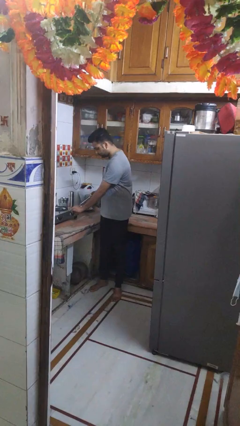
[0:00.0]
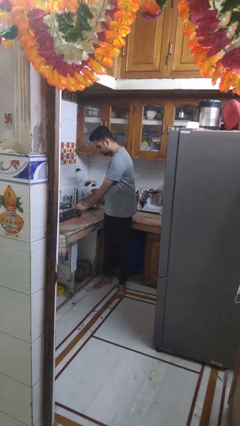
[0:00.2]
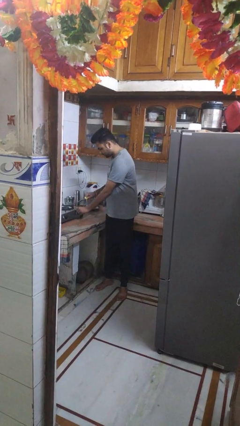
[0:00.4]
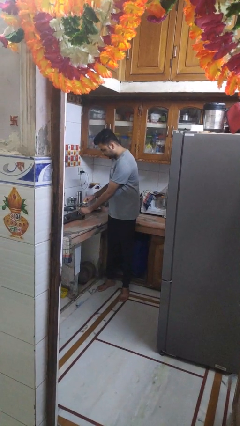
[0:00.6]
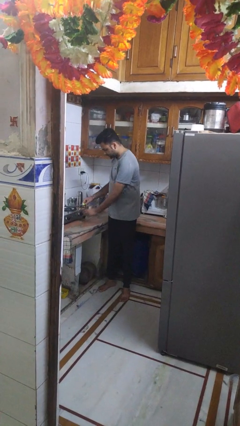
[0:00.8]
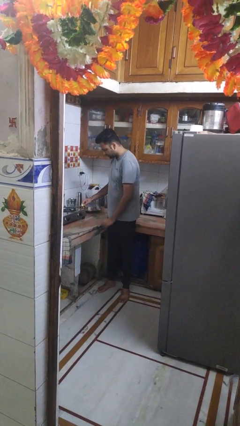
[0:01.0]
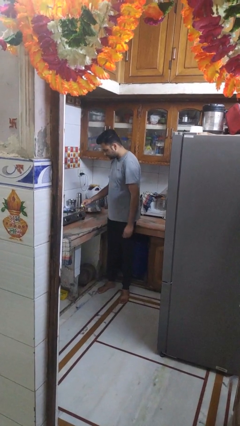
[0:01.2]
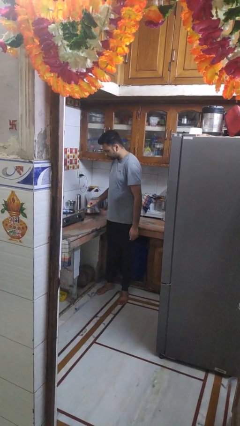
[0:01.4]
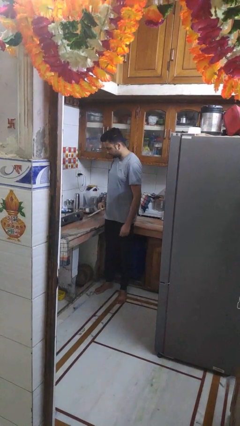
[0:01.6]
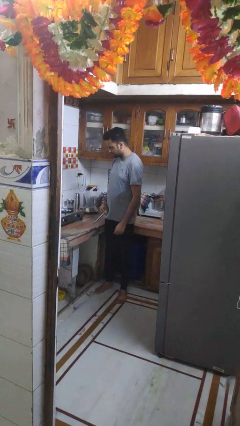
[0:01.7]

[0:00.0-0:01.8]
person turns on stovetop

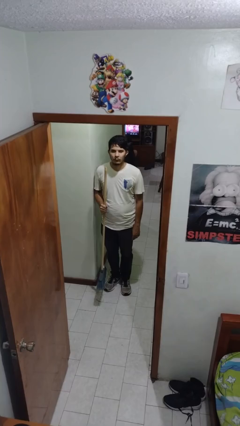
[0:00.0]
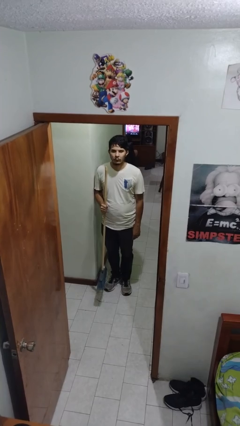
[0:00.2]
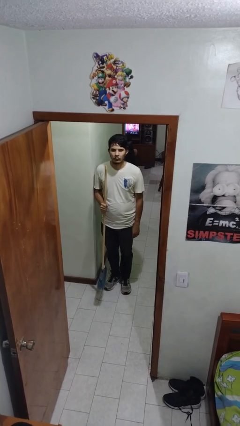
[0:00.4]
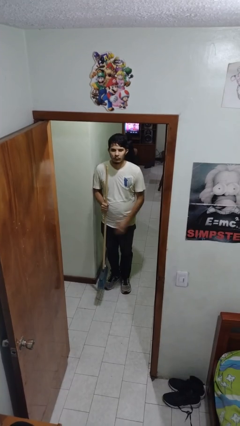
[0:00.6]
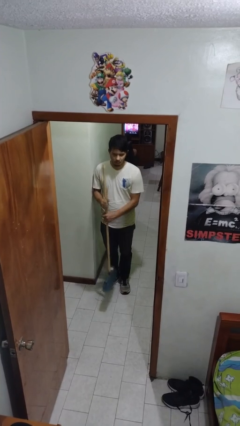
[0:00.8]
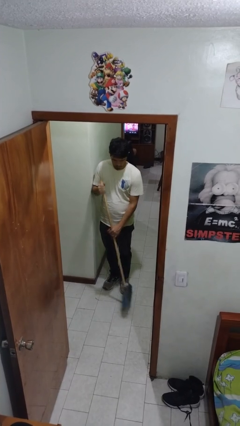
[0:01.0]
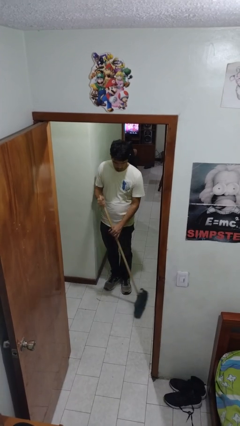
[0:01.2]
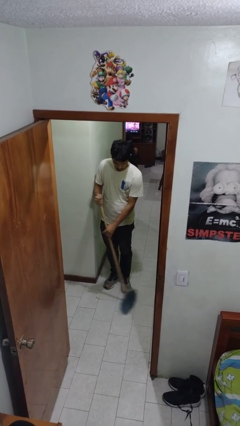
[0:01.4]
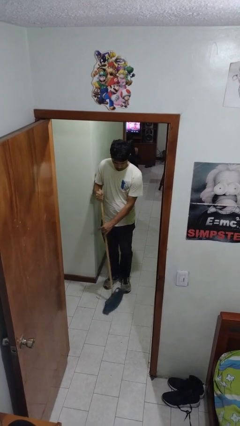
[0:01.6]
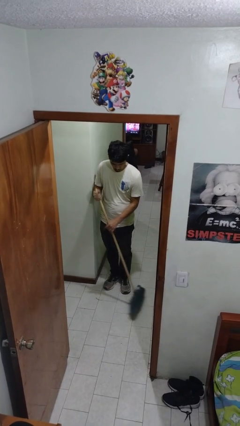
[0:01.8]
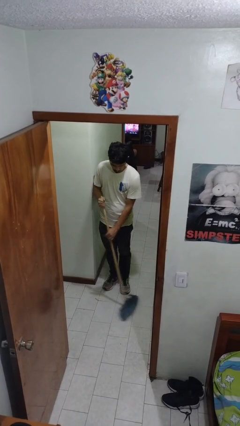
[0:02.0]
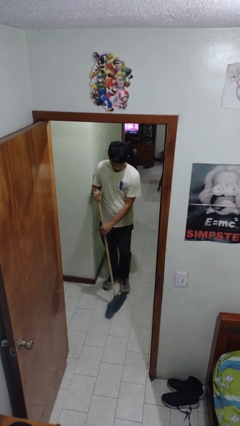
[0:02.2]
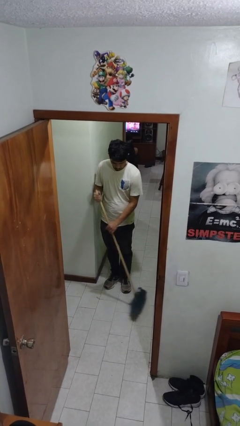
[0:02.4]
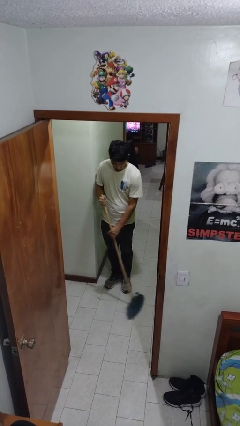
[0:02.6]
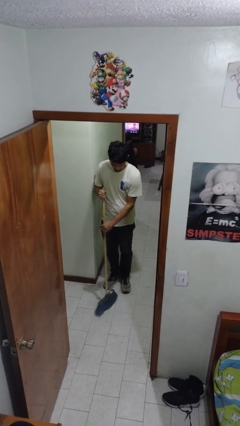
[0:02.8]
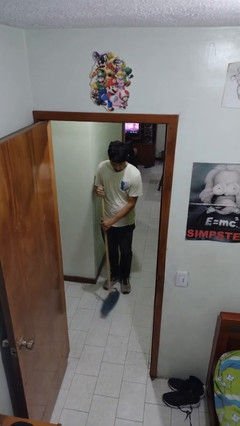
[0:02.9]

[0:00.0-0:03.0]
person sweeps floor

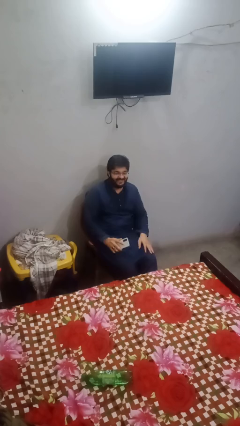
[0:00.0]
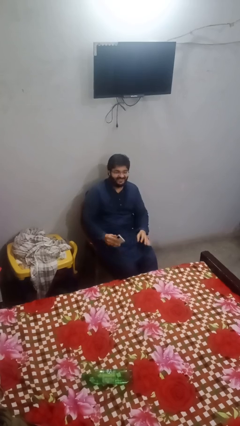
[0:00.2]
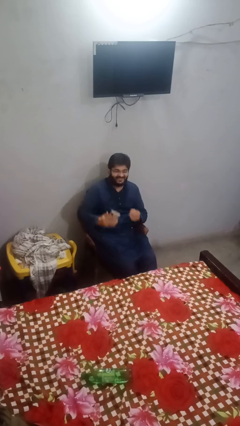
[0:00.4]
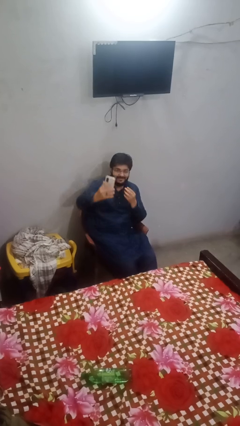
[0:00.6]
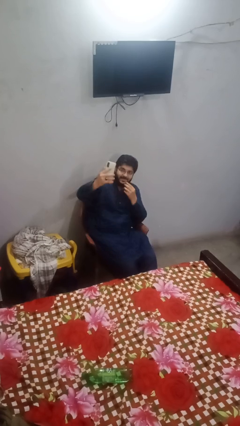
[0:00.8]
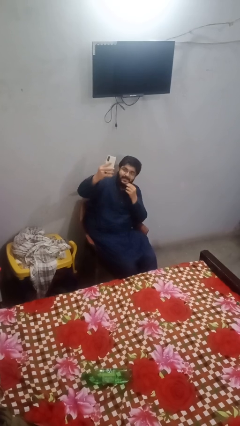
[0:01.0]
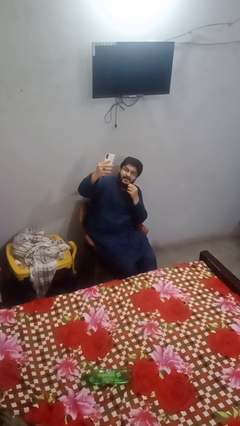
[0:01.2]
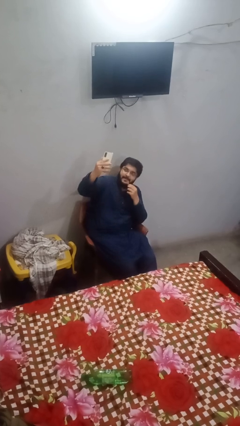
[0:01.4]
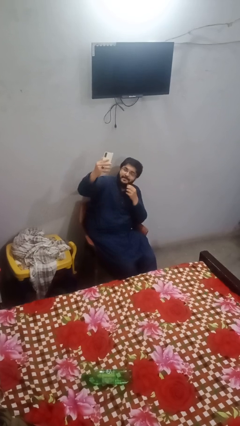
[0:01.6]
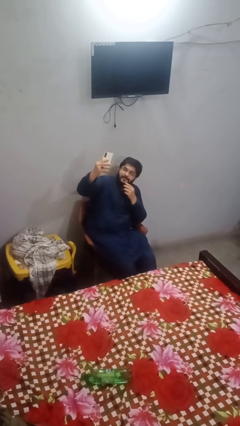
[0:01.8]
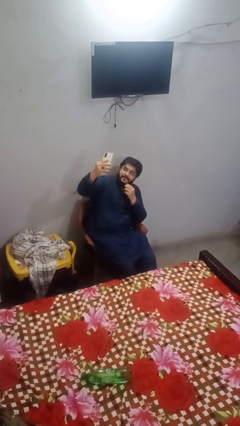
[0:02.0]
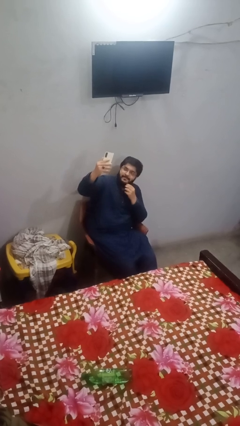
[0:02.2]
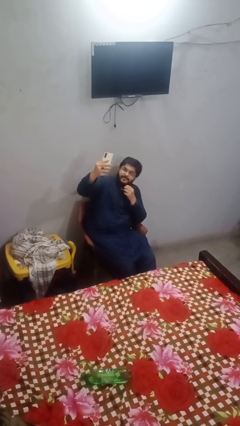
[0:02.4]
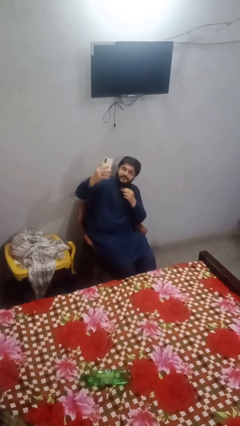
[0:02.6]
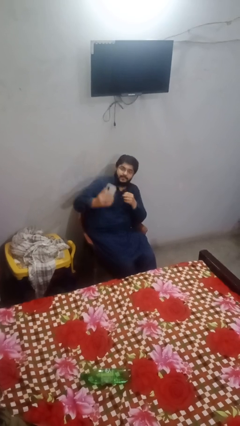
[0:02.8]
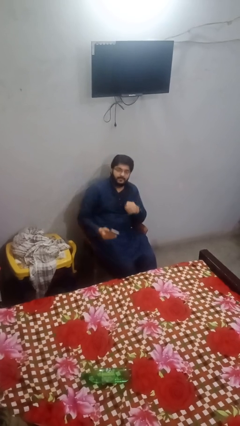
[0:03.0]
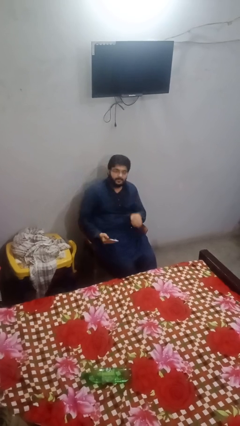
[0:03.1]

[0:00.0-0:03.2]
person takes selfie

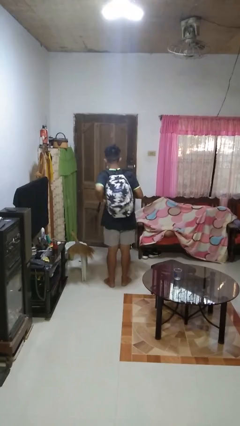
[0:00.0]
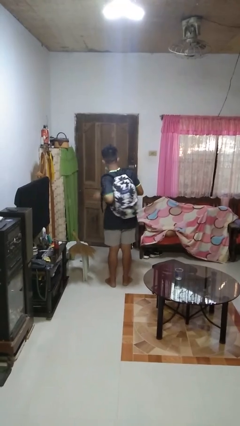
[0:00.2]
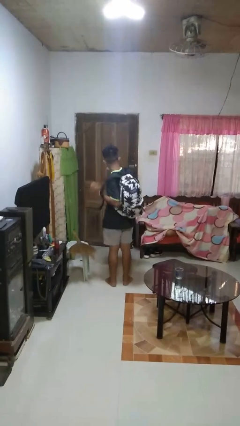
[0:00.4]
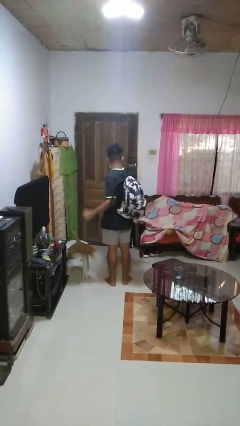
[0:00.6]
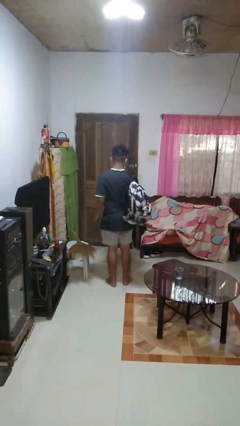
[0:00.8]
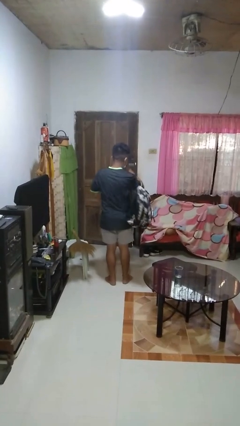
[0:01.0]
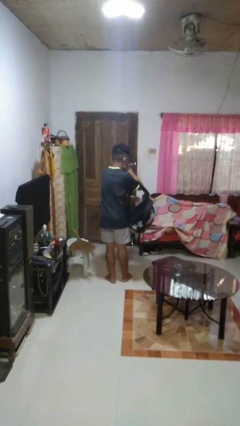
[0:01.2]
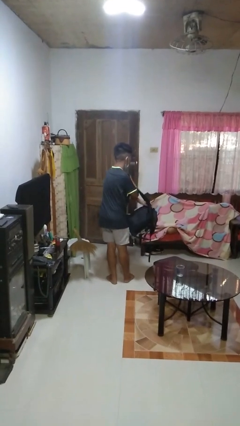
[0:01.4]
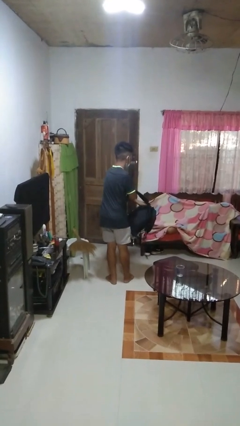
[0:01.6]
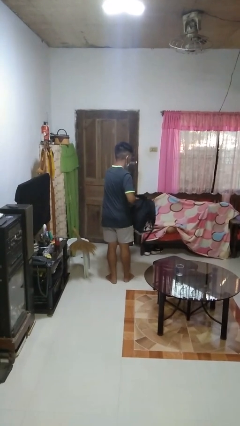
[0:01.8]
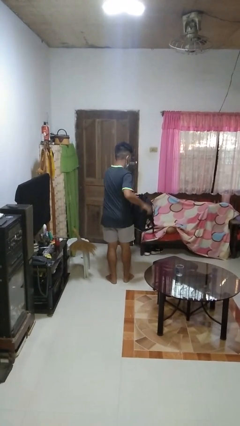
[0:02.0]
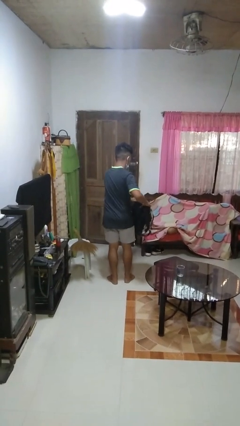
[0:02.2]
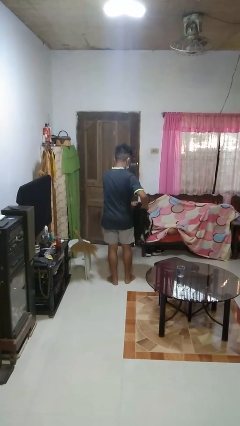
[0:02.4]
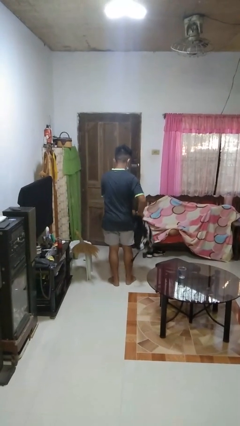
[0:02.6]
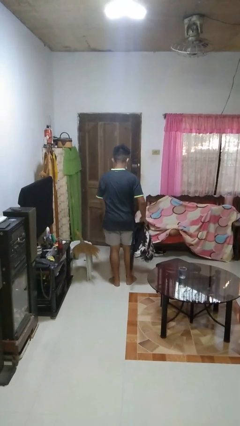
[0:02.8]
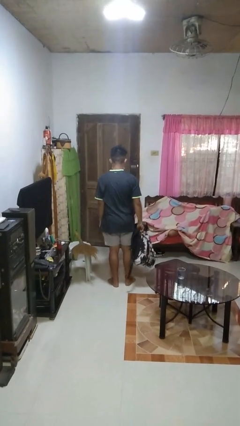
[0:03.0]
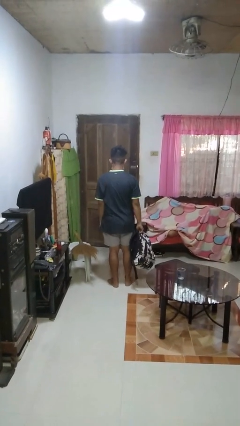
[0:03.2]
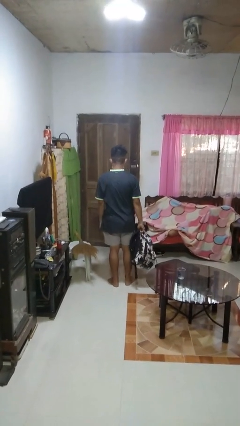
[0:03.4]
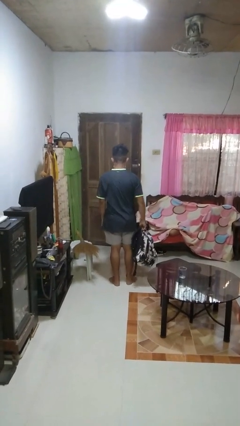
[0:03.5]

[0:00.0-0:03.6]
person takes off backpack

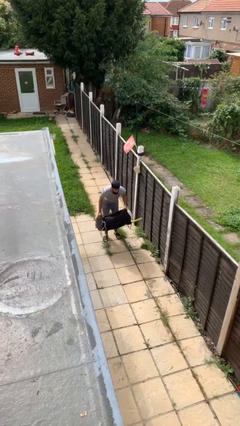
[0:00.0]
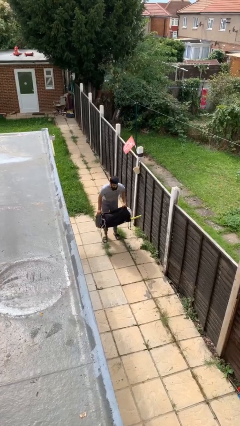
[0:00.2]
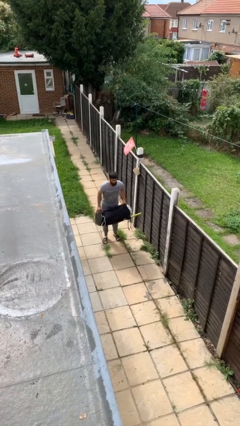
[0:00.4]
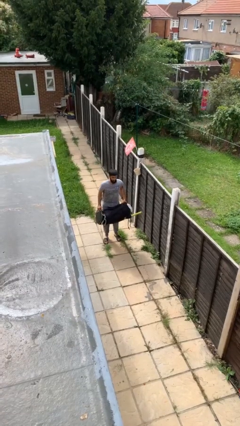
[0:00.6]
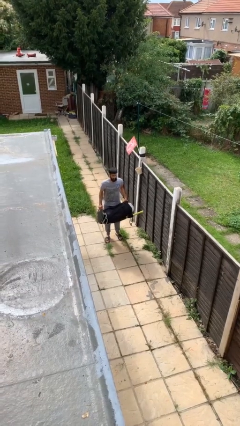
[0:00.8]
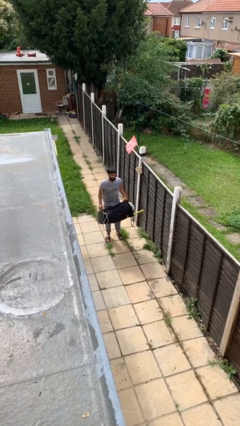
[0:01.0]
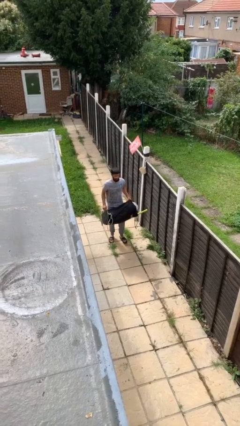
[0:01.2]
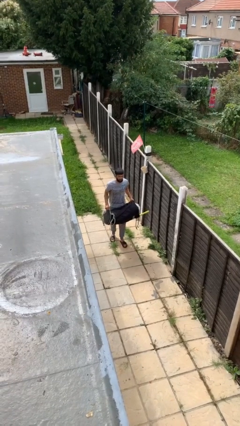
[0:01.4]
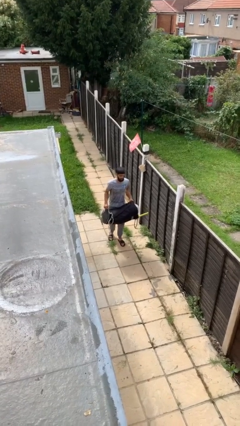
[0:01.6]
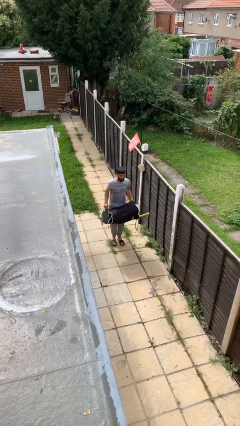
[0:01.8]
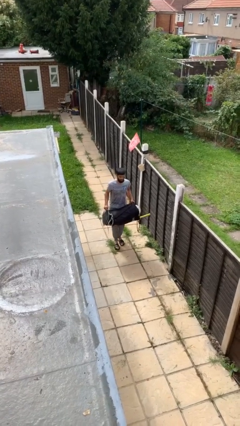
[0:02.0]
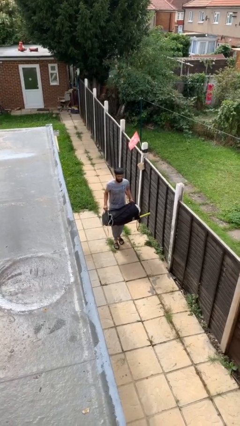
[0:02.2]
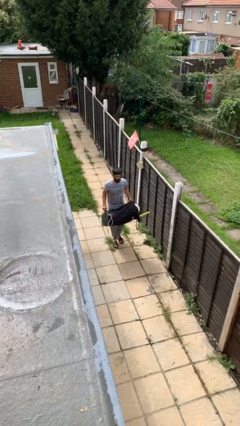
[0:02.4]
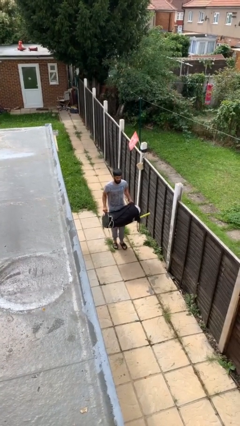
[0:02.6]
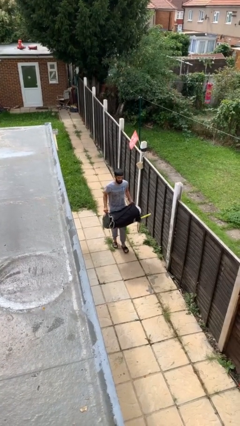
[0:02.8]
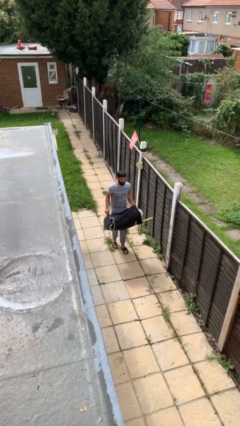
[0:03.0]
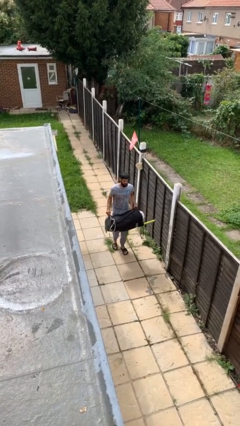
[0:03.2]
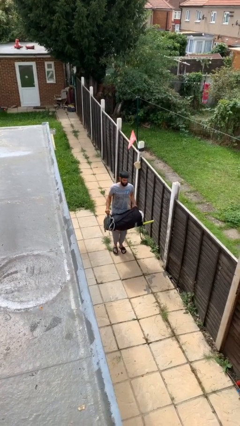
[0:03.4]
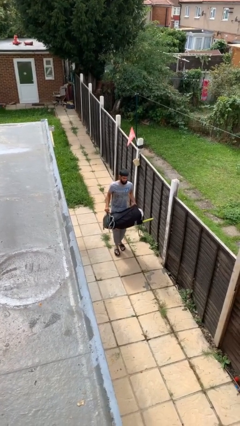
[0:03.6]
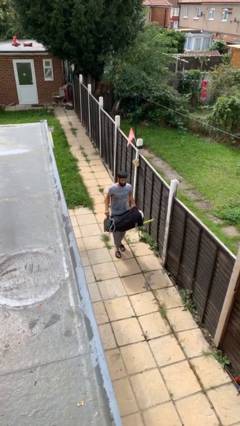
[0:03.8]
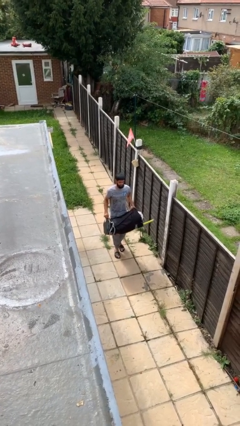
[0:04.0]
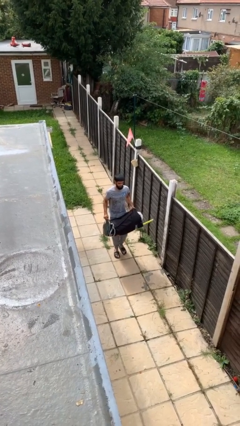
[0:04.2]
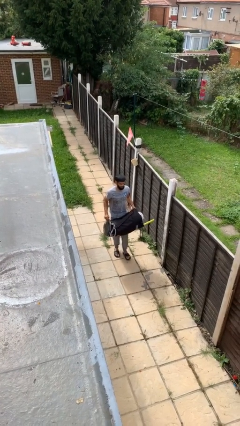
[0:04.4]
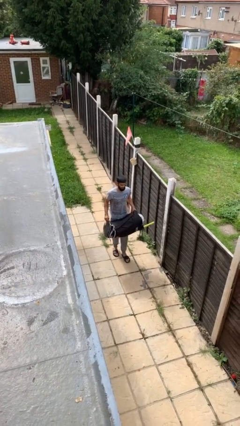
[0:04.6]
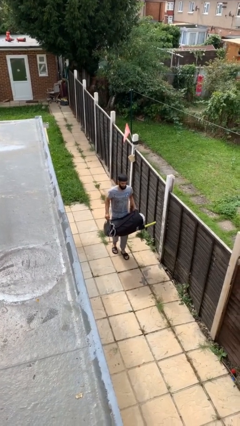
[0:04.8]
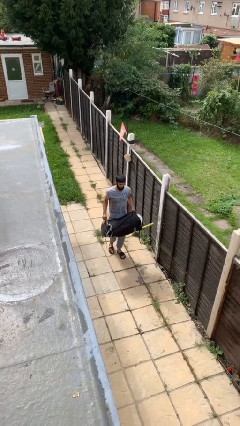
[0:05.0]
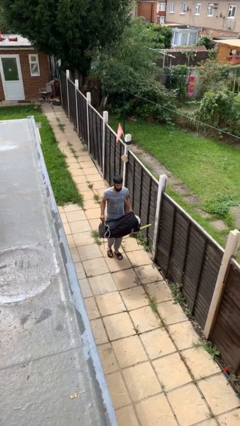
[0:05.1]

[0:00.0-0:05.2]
person carries heavy object

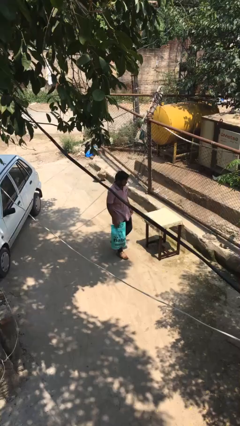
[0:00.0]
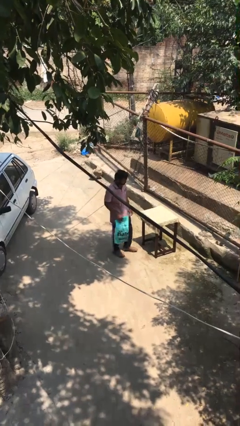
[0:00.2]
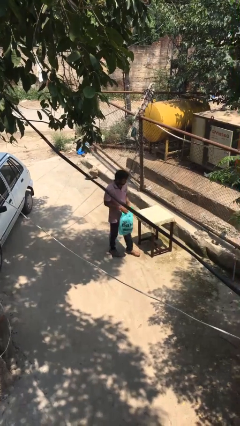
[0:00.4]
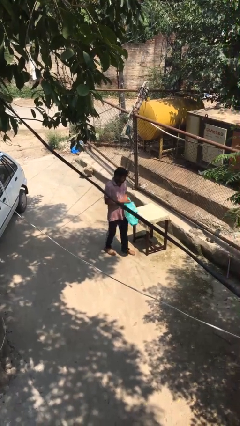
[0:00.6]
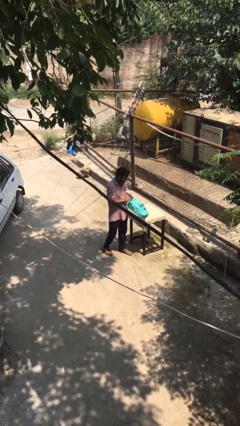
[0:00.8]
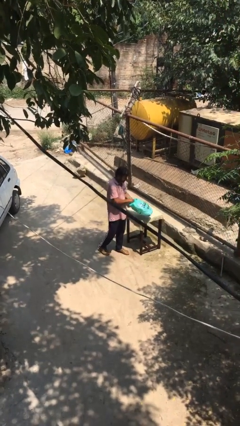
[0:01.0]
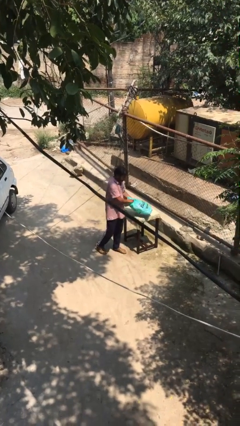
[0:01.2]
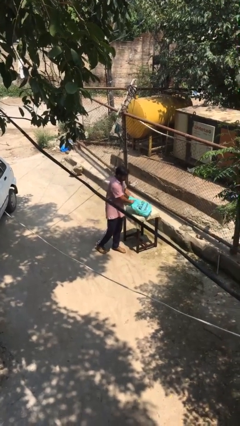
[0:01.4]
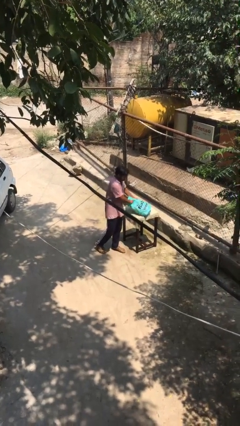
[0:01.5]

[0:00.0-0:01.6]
person puts down object on table
